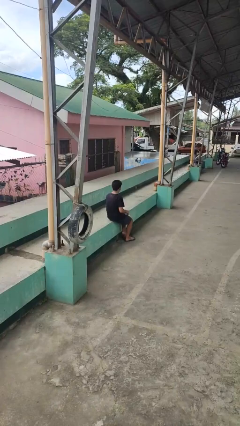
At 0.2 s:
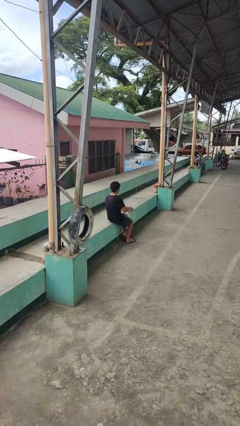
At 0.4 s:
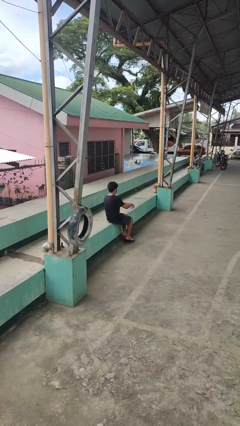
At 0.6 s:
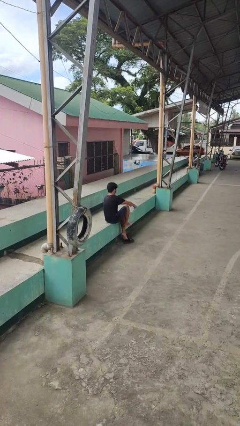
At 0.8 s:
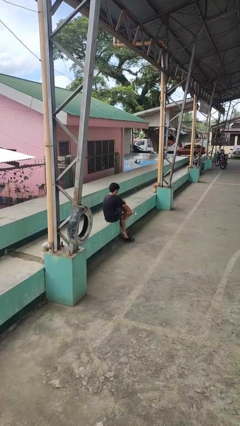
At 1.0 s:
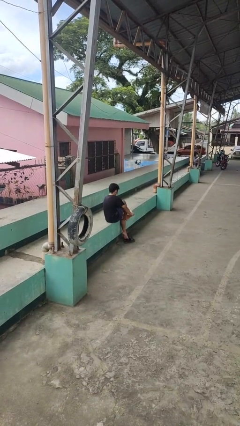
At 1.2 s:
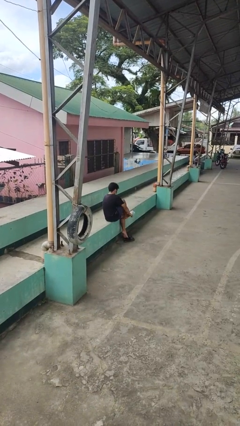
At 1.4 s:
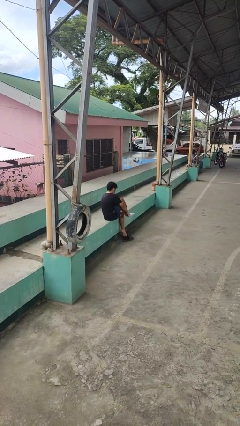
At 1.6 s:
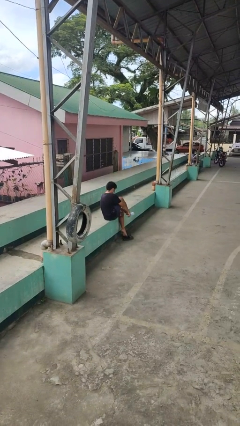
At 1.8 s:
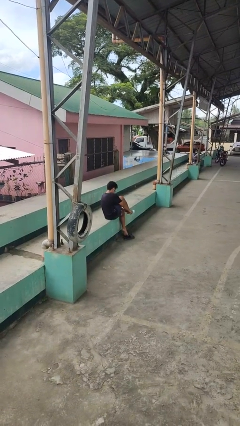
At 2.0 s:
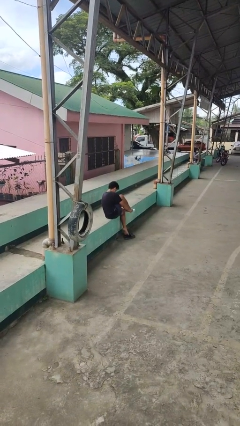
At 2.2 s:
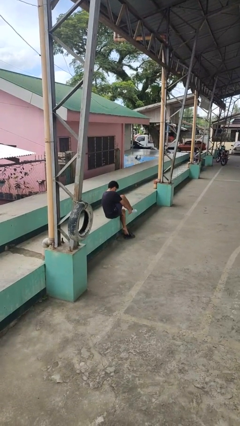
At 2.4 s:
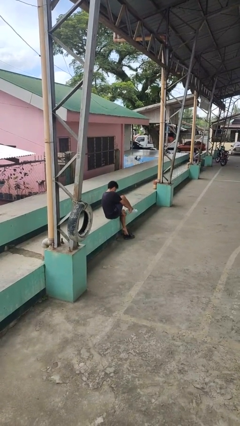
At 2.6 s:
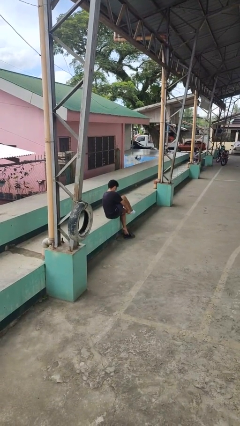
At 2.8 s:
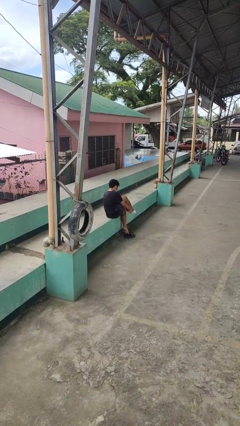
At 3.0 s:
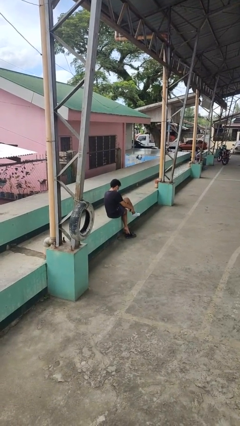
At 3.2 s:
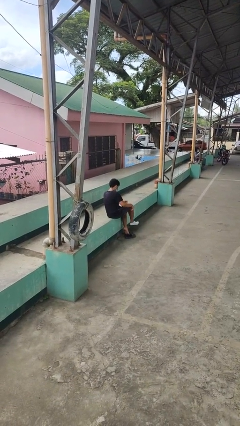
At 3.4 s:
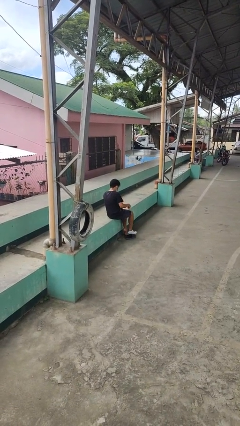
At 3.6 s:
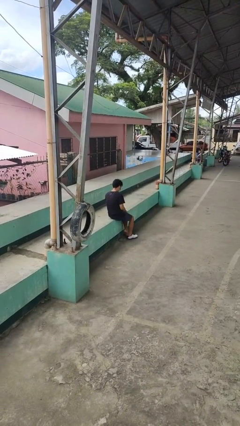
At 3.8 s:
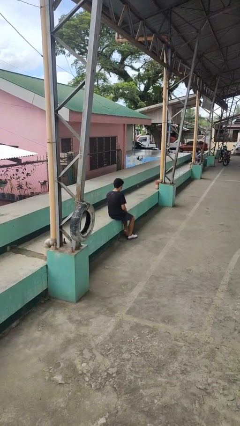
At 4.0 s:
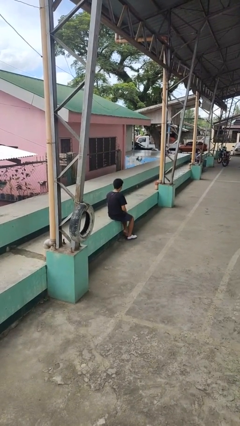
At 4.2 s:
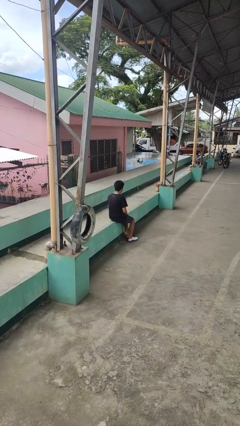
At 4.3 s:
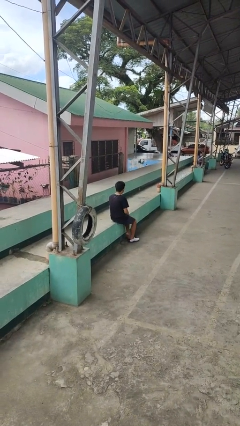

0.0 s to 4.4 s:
person puts on socks

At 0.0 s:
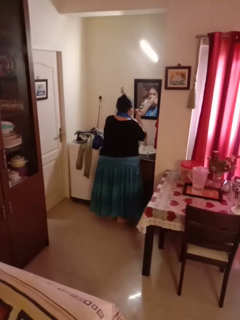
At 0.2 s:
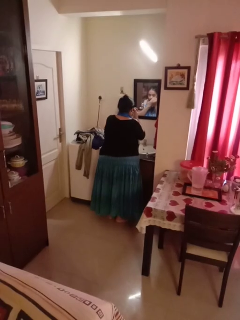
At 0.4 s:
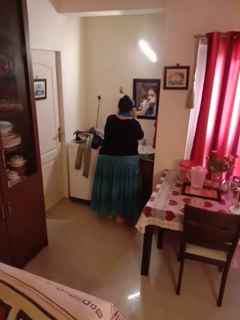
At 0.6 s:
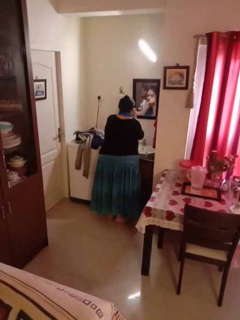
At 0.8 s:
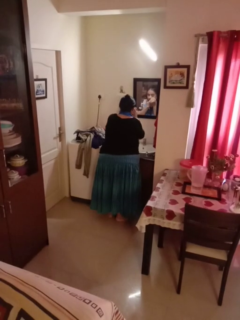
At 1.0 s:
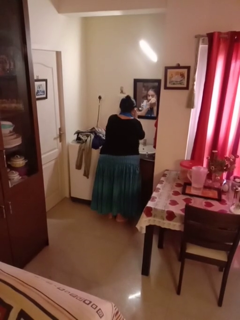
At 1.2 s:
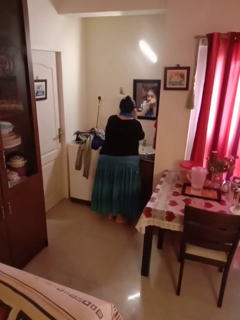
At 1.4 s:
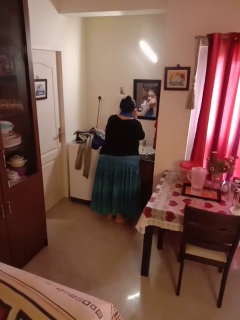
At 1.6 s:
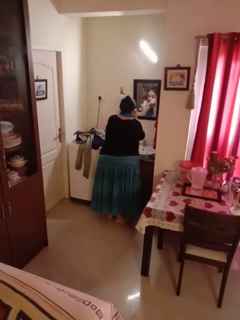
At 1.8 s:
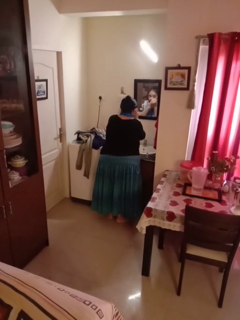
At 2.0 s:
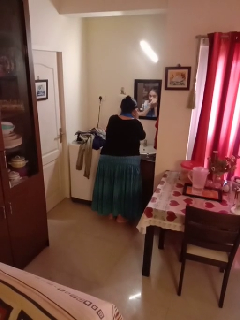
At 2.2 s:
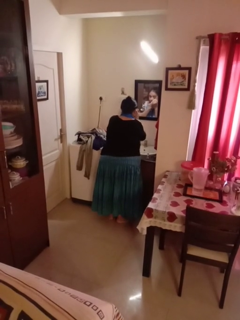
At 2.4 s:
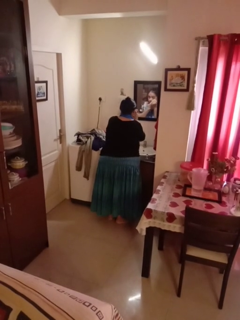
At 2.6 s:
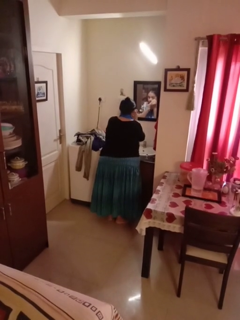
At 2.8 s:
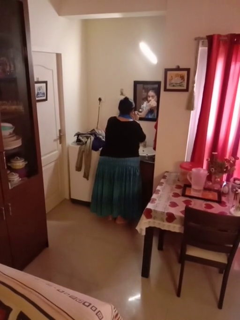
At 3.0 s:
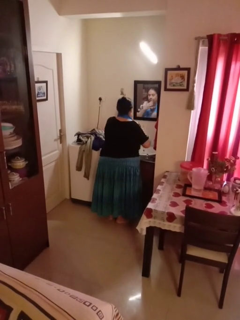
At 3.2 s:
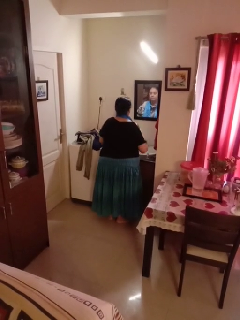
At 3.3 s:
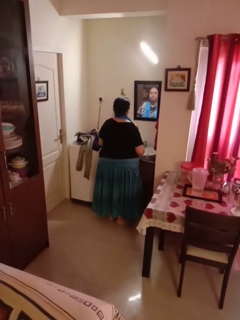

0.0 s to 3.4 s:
person applies eye makeup

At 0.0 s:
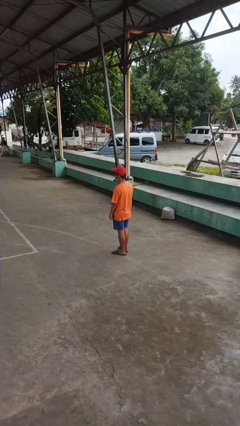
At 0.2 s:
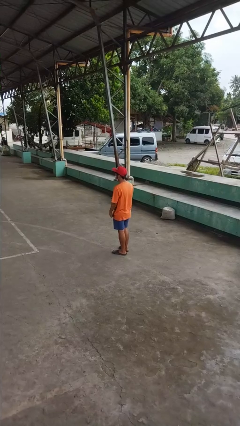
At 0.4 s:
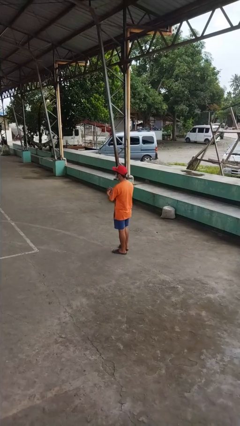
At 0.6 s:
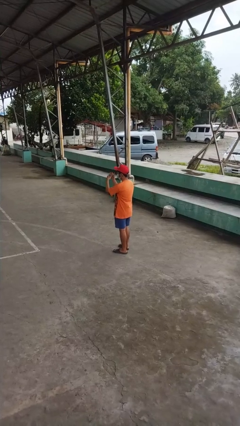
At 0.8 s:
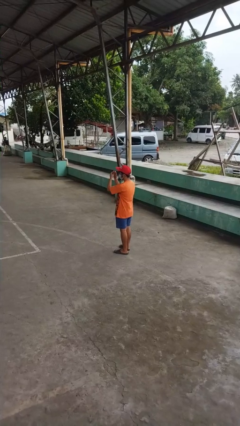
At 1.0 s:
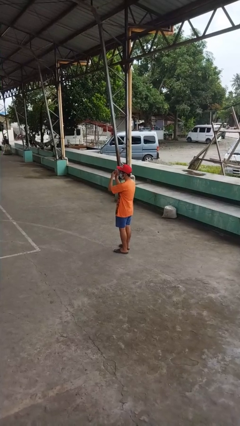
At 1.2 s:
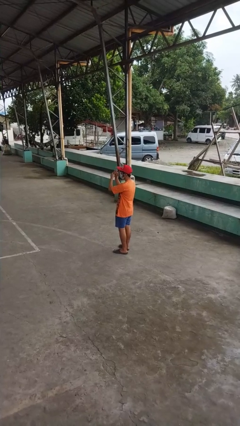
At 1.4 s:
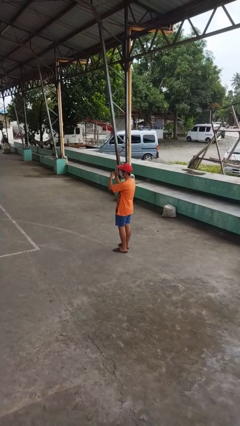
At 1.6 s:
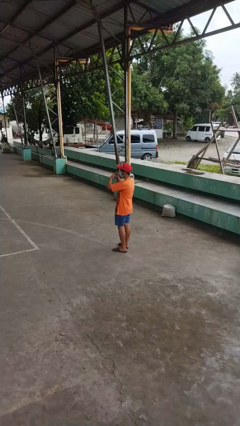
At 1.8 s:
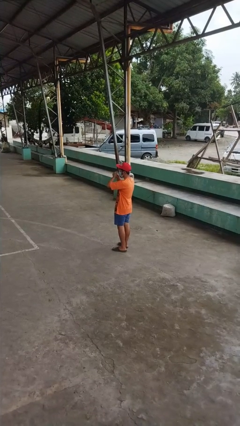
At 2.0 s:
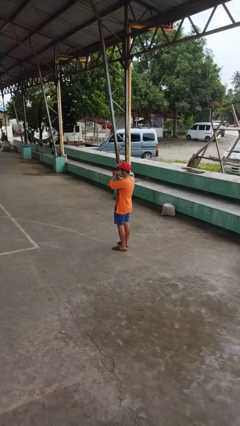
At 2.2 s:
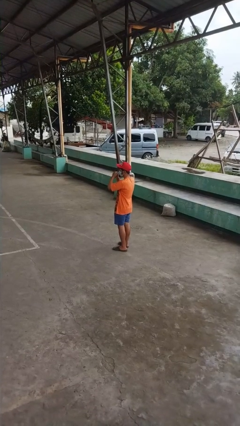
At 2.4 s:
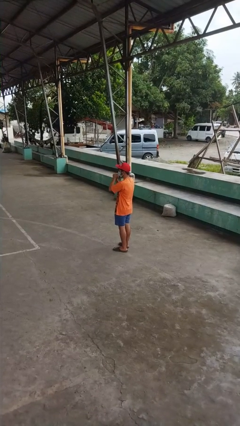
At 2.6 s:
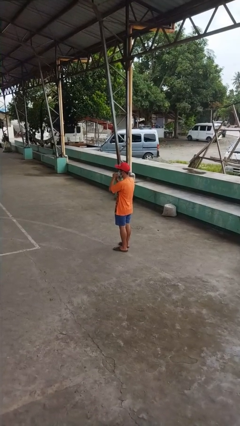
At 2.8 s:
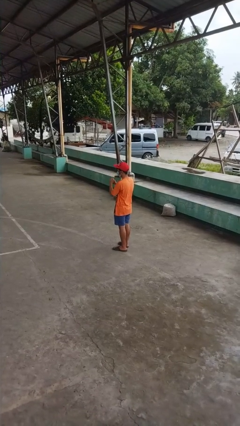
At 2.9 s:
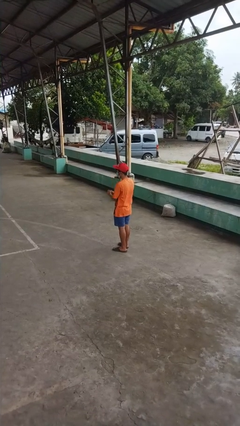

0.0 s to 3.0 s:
person cracks knuckles

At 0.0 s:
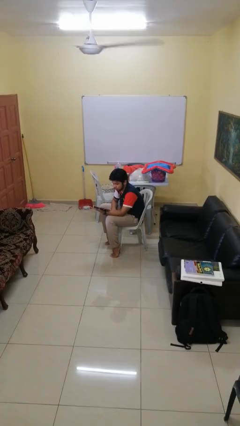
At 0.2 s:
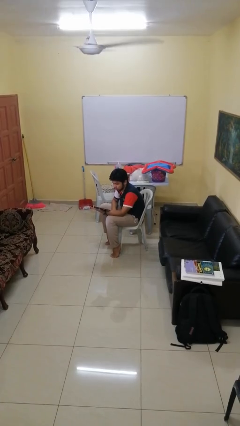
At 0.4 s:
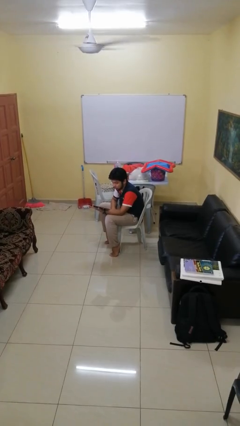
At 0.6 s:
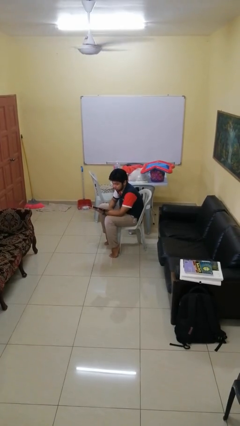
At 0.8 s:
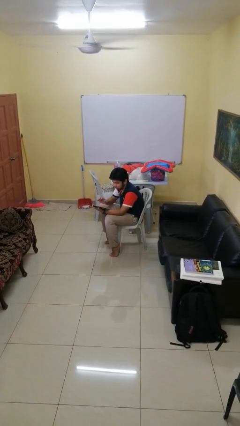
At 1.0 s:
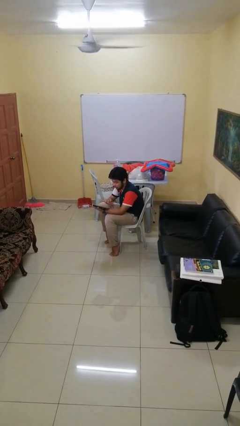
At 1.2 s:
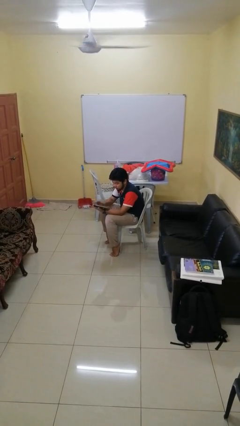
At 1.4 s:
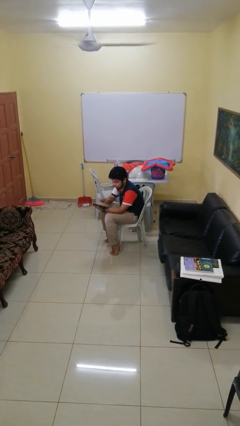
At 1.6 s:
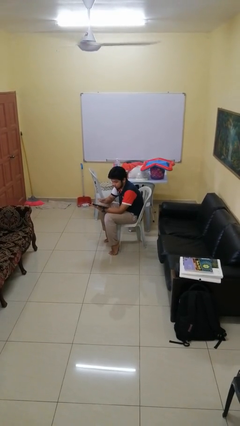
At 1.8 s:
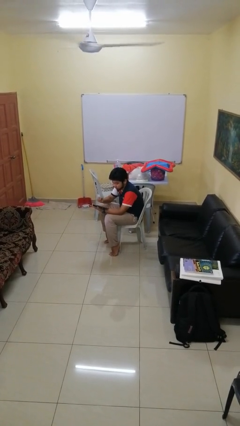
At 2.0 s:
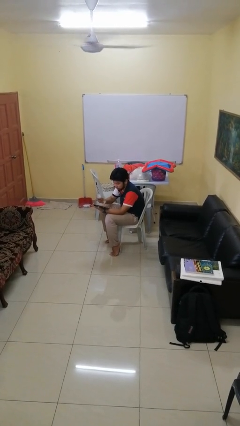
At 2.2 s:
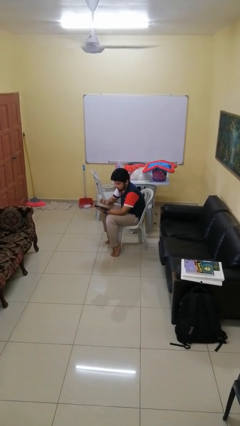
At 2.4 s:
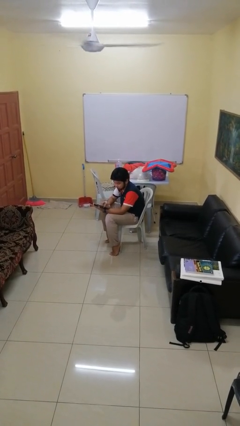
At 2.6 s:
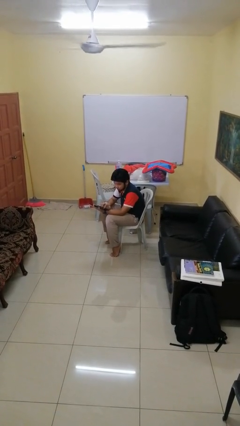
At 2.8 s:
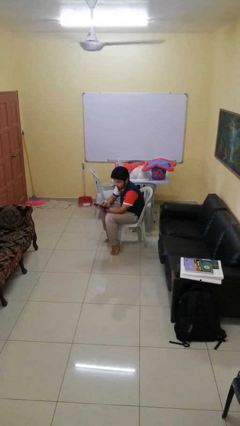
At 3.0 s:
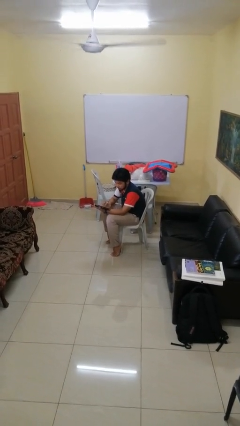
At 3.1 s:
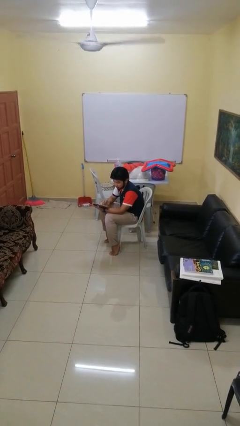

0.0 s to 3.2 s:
person interacts with tablet

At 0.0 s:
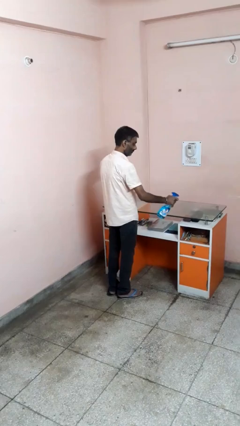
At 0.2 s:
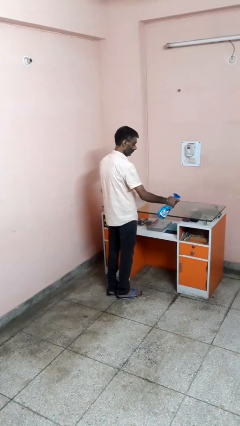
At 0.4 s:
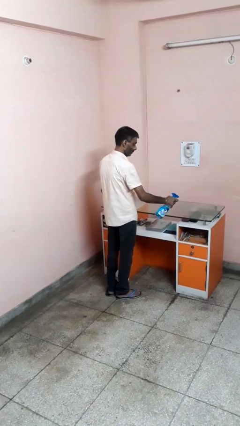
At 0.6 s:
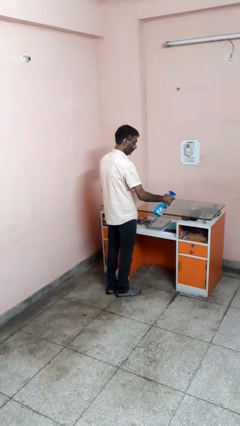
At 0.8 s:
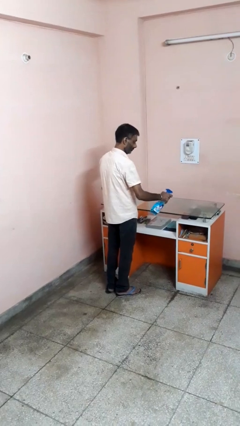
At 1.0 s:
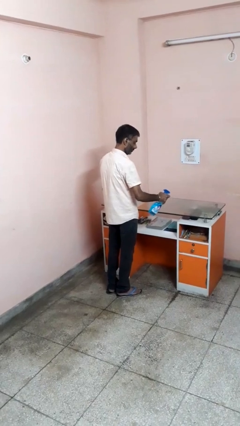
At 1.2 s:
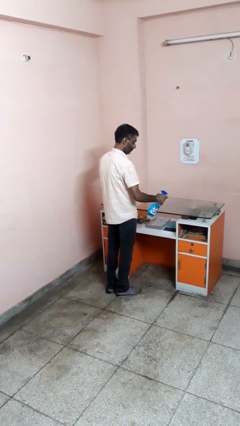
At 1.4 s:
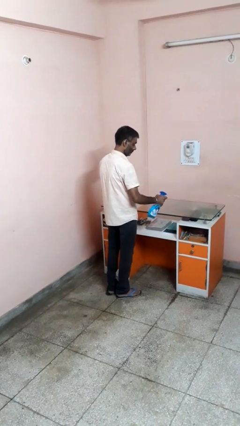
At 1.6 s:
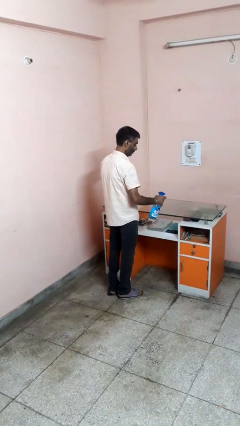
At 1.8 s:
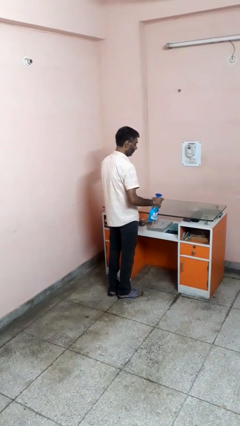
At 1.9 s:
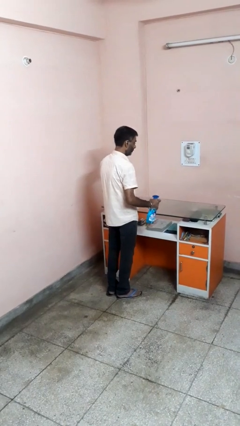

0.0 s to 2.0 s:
person sprays from bottle

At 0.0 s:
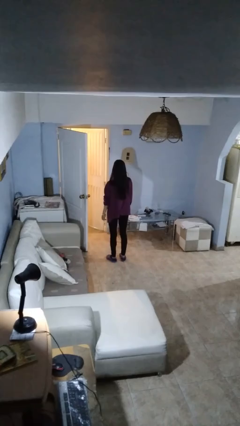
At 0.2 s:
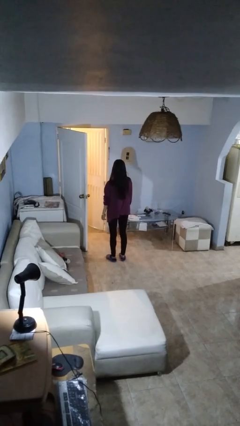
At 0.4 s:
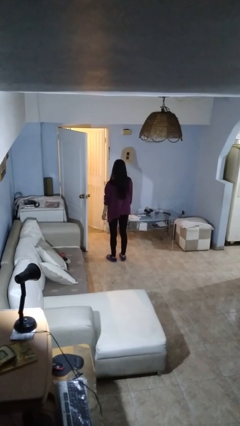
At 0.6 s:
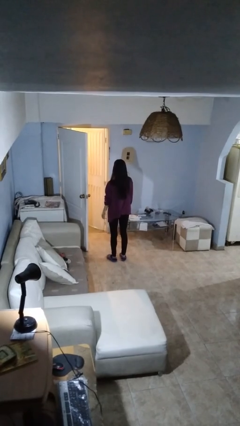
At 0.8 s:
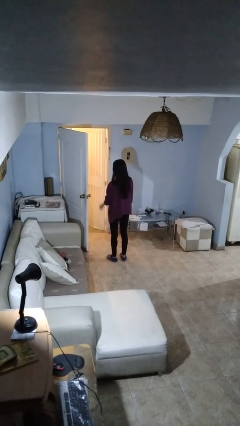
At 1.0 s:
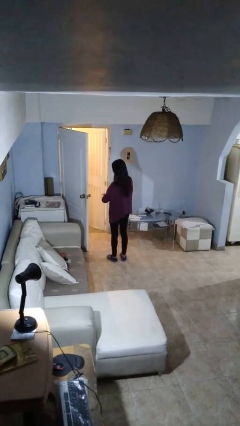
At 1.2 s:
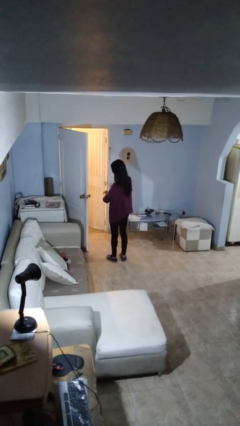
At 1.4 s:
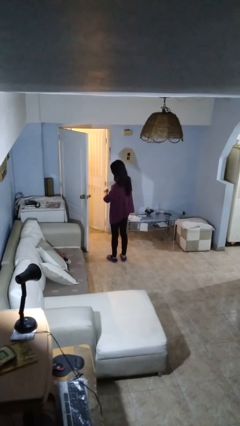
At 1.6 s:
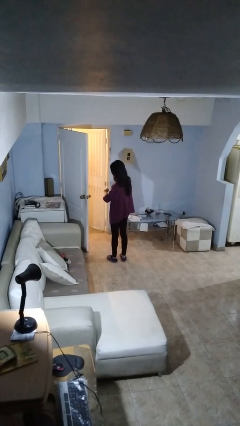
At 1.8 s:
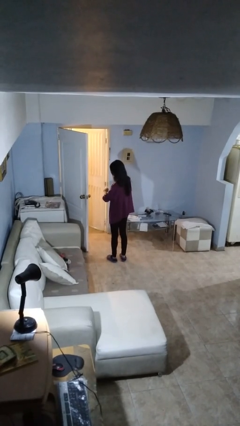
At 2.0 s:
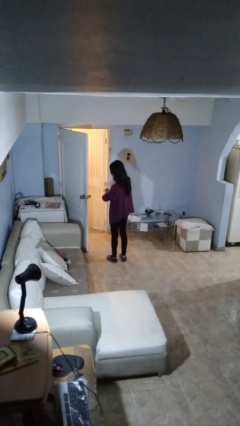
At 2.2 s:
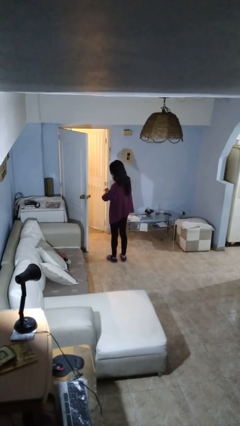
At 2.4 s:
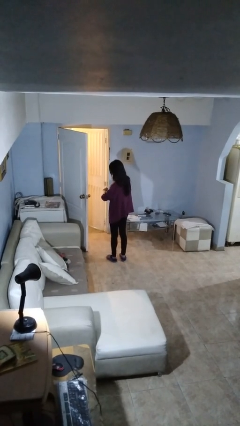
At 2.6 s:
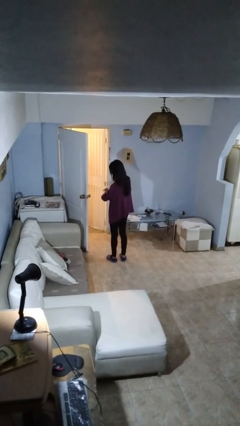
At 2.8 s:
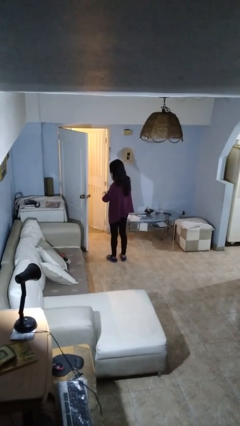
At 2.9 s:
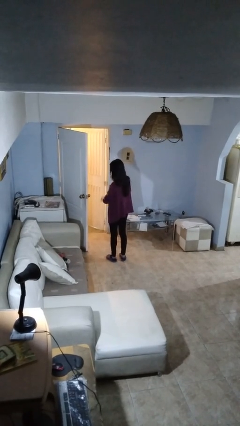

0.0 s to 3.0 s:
person looks at wristwatch
